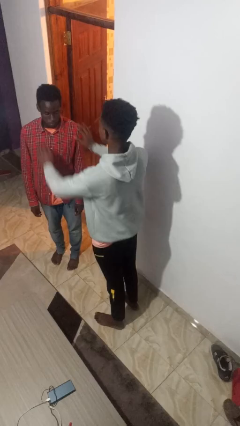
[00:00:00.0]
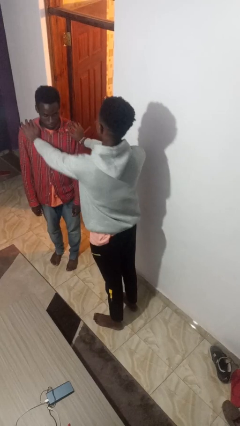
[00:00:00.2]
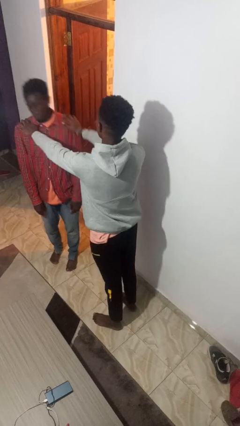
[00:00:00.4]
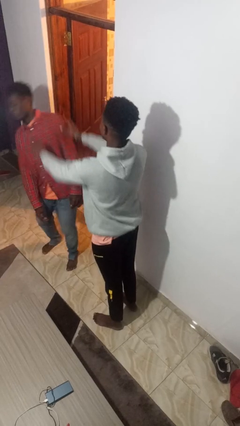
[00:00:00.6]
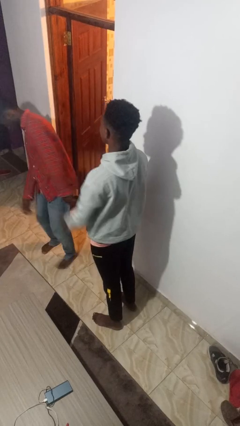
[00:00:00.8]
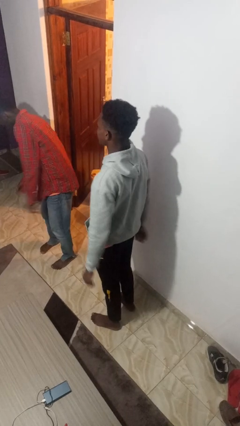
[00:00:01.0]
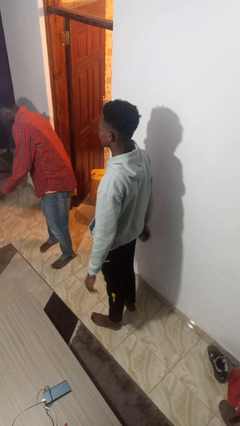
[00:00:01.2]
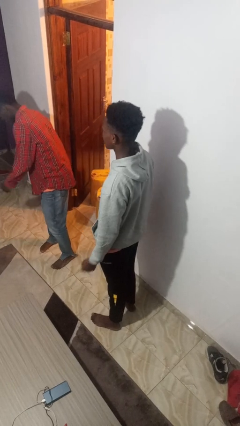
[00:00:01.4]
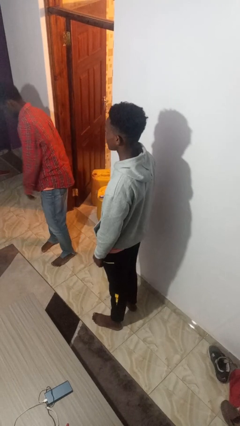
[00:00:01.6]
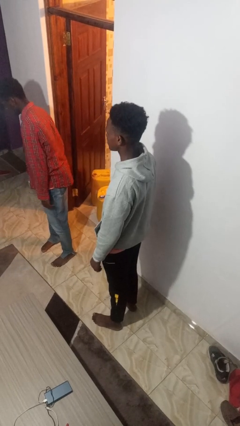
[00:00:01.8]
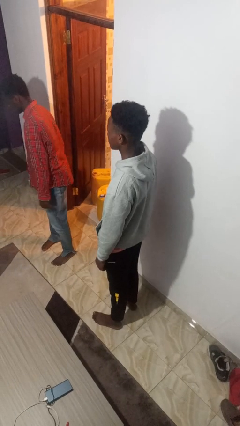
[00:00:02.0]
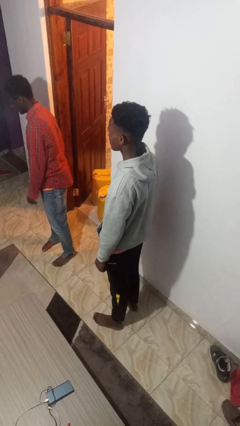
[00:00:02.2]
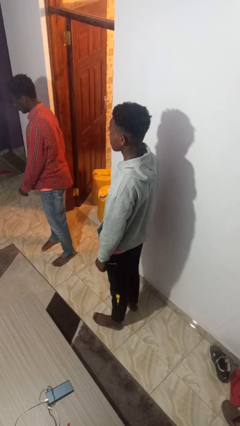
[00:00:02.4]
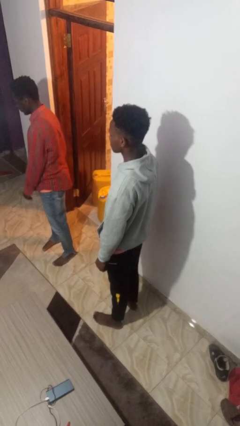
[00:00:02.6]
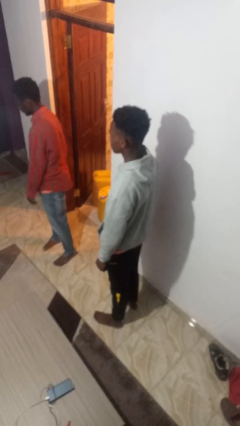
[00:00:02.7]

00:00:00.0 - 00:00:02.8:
person shoves person

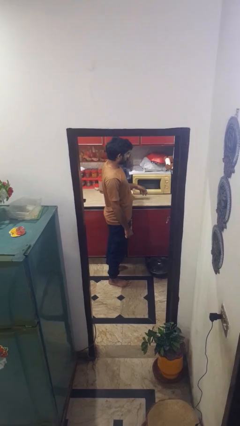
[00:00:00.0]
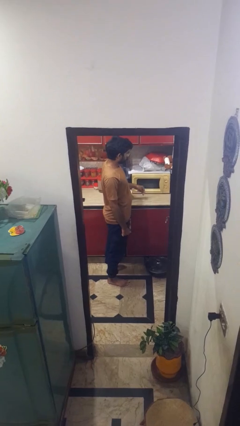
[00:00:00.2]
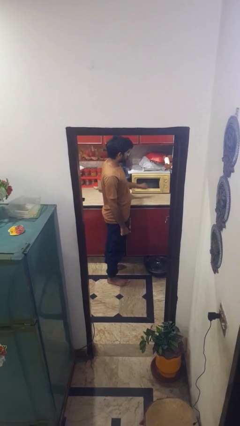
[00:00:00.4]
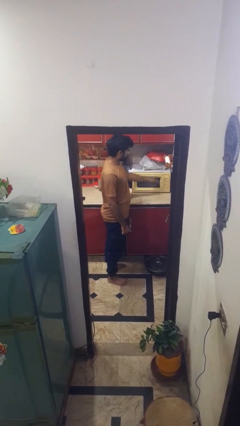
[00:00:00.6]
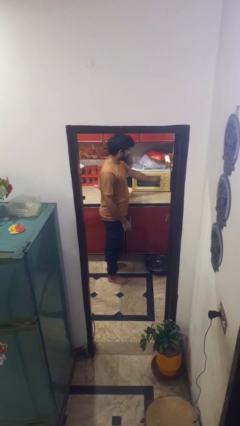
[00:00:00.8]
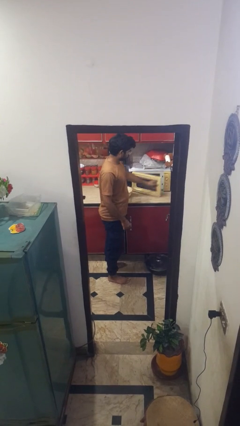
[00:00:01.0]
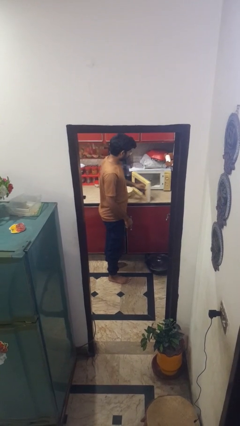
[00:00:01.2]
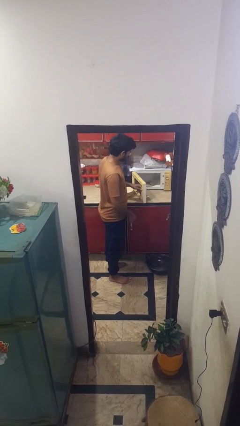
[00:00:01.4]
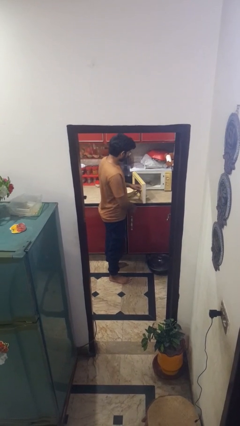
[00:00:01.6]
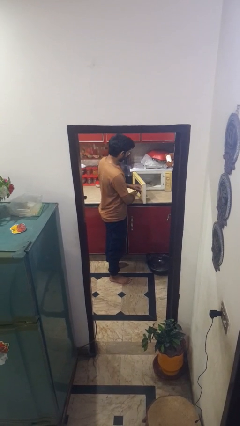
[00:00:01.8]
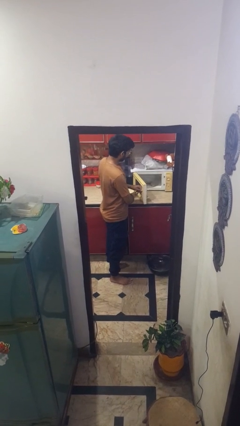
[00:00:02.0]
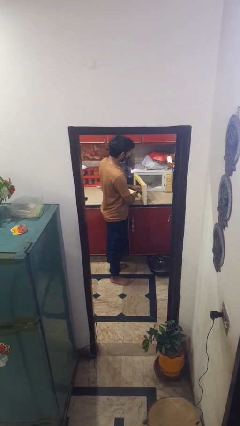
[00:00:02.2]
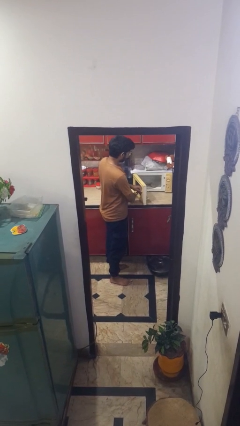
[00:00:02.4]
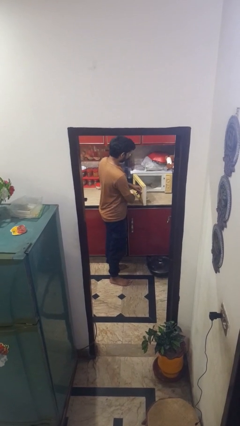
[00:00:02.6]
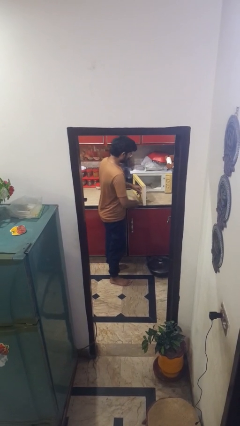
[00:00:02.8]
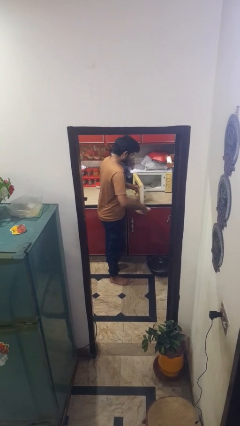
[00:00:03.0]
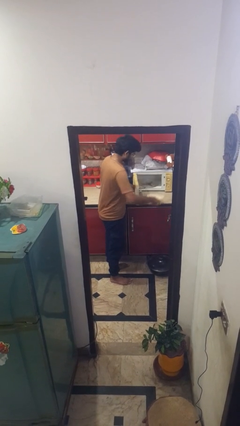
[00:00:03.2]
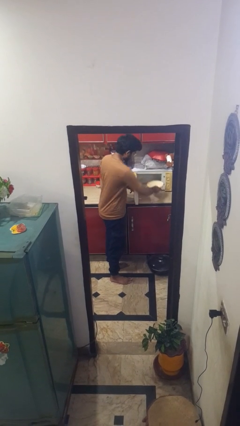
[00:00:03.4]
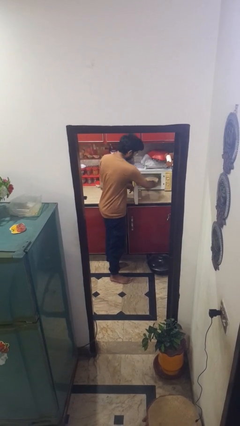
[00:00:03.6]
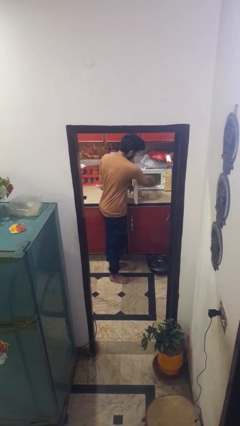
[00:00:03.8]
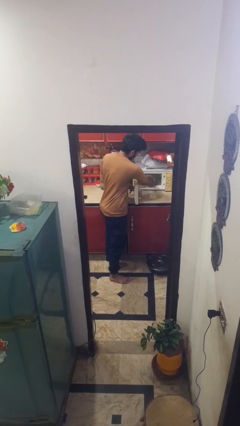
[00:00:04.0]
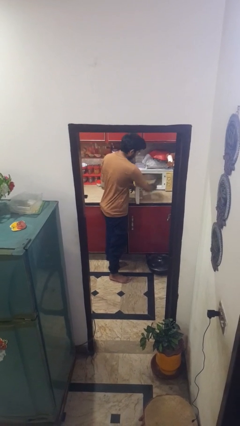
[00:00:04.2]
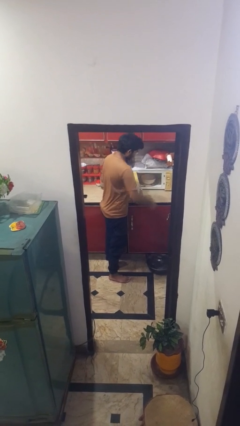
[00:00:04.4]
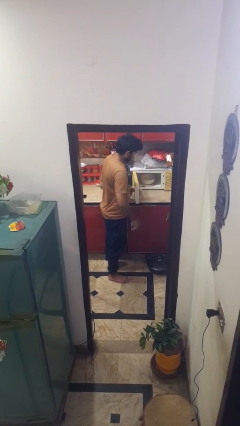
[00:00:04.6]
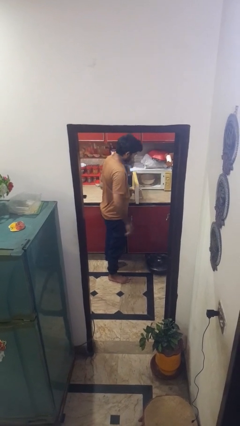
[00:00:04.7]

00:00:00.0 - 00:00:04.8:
person opens microwave

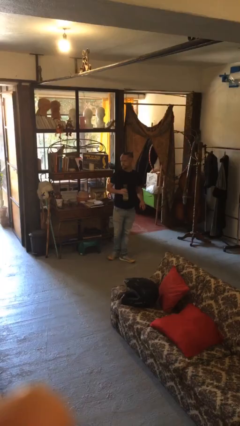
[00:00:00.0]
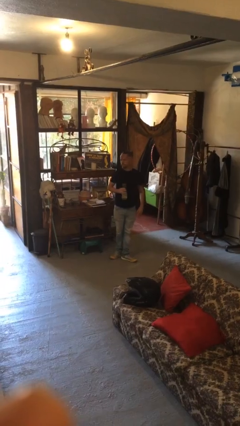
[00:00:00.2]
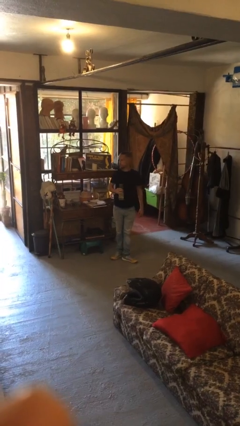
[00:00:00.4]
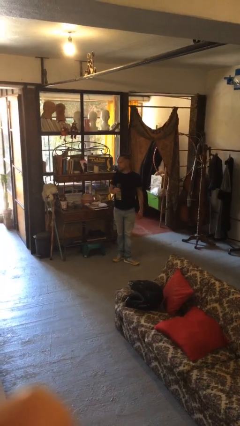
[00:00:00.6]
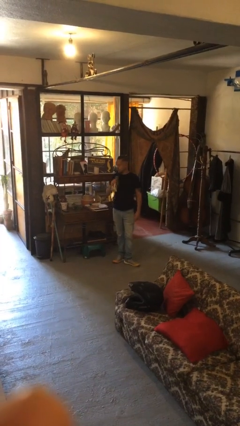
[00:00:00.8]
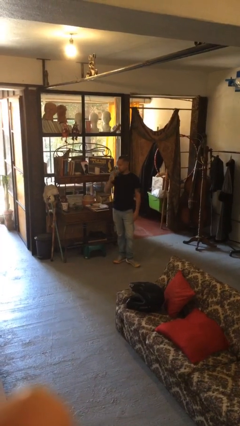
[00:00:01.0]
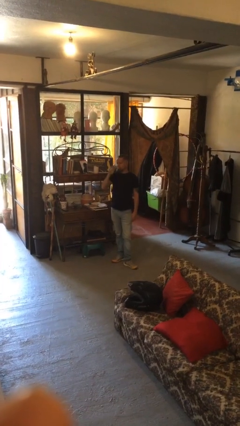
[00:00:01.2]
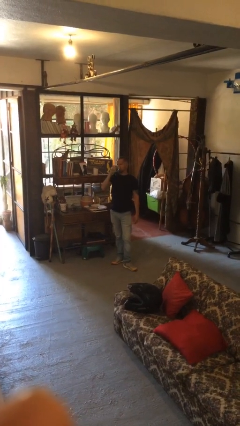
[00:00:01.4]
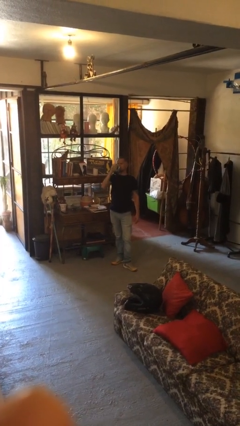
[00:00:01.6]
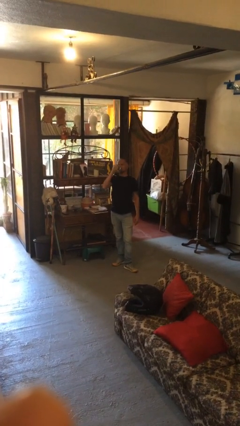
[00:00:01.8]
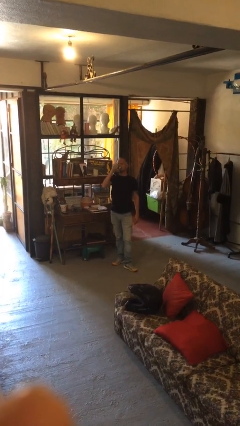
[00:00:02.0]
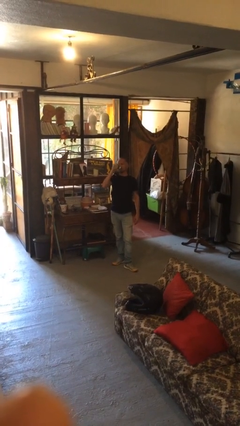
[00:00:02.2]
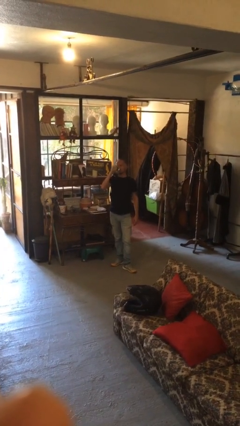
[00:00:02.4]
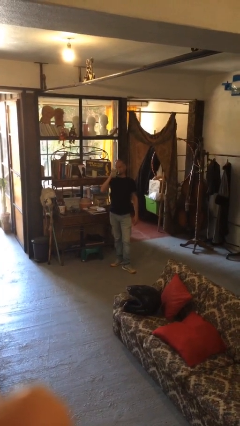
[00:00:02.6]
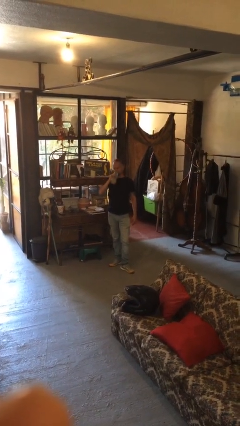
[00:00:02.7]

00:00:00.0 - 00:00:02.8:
person drinks from bottle

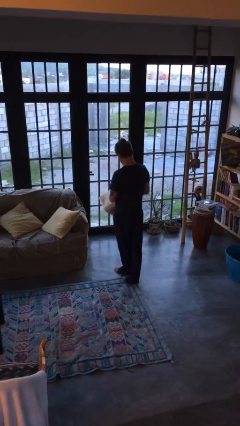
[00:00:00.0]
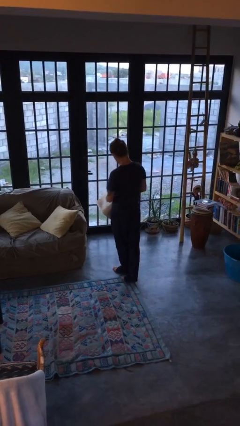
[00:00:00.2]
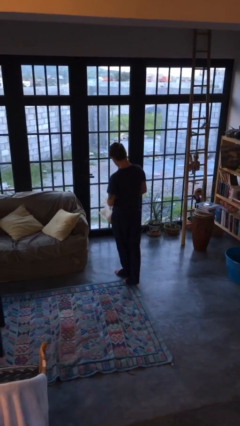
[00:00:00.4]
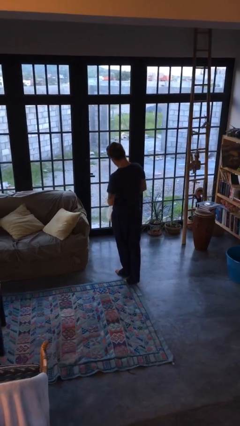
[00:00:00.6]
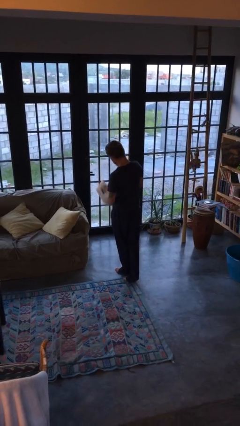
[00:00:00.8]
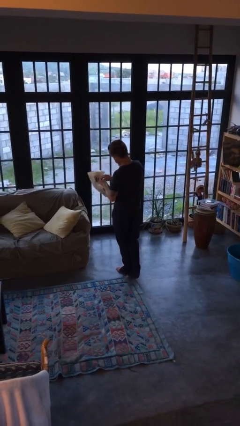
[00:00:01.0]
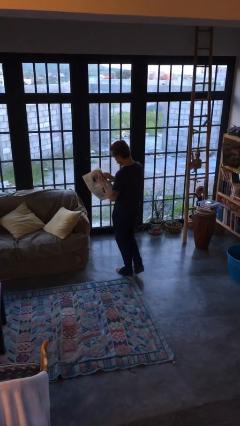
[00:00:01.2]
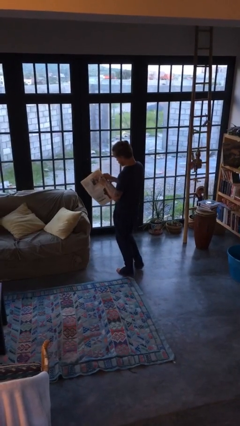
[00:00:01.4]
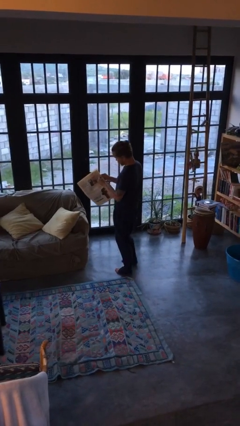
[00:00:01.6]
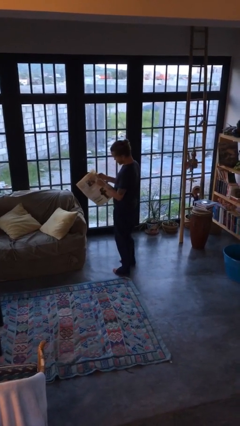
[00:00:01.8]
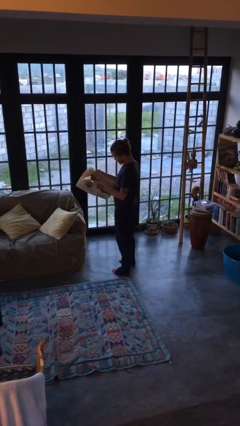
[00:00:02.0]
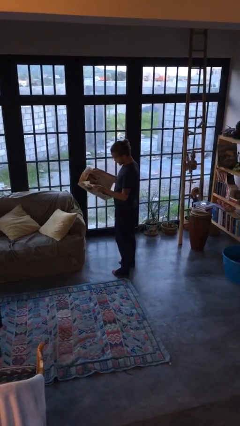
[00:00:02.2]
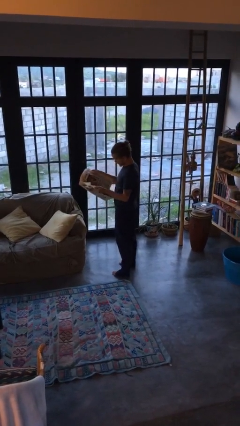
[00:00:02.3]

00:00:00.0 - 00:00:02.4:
person reads newspaper

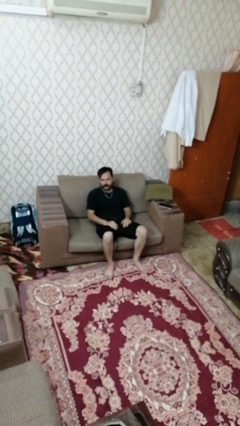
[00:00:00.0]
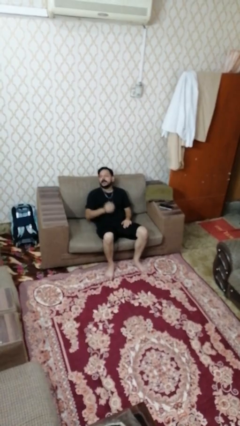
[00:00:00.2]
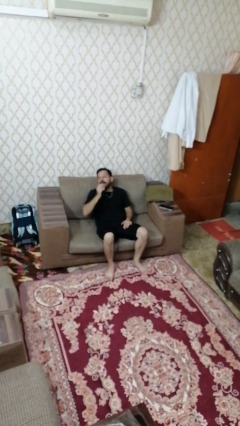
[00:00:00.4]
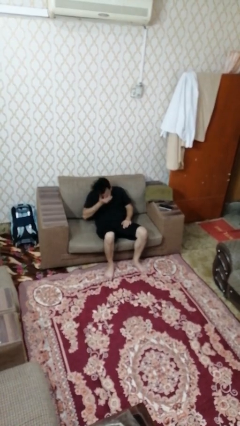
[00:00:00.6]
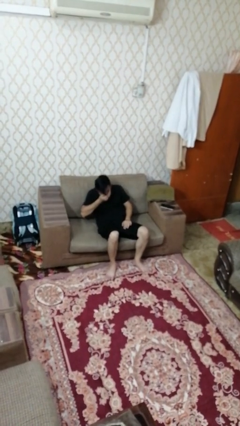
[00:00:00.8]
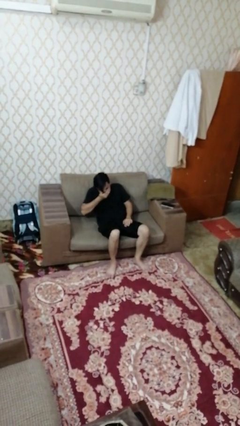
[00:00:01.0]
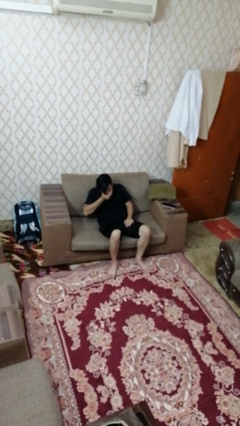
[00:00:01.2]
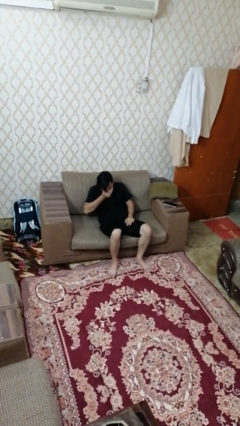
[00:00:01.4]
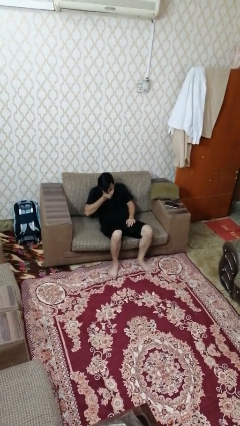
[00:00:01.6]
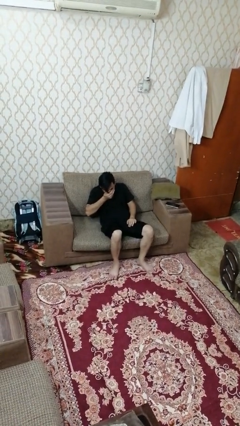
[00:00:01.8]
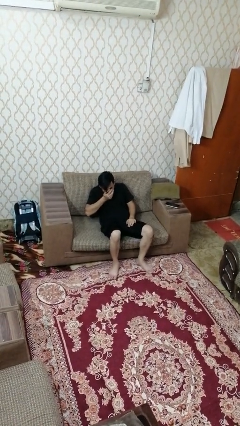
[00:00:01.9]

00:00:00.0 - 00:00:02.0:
person sneezes into hand

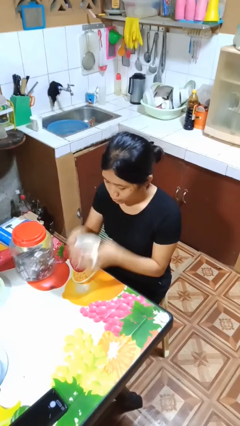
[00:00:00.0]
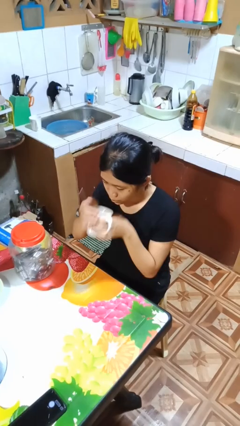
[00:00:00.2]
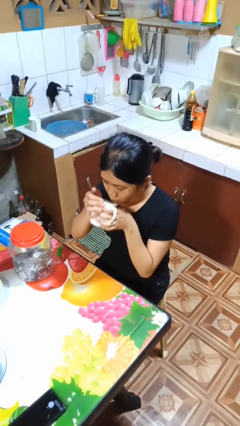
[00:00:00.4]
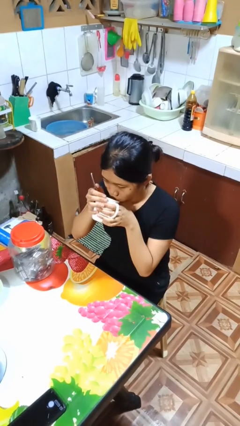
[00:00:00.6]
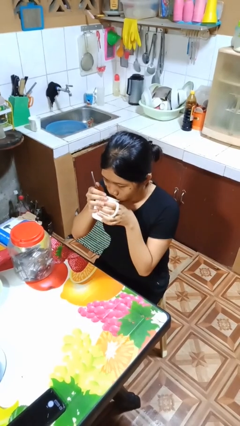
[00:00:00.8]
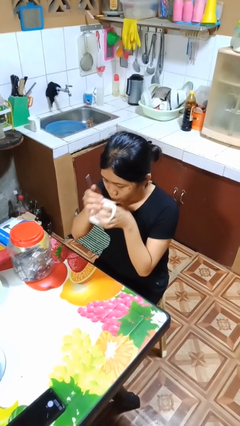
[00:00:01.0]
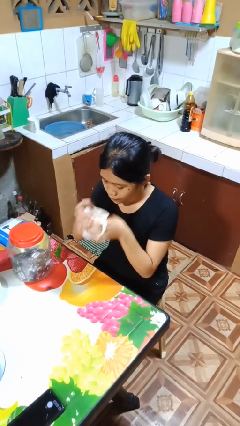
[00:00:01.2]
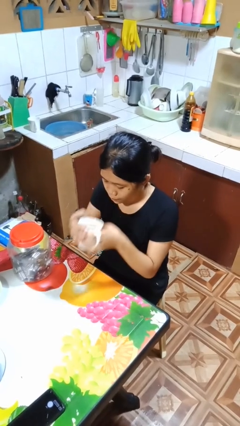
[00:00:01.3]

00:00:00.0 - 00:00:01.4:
person drinks from mug

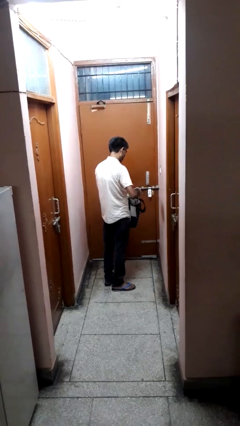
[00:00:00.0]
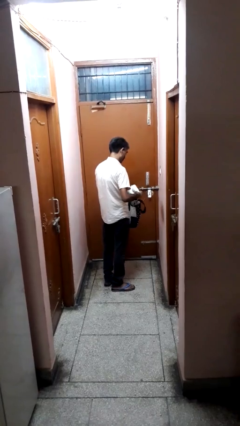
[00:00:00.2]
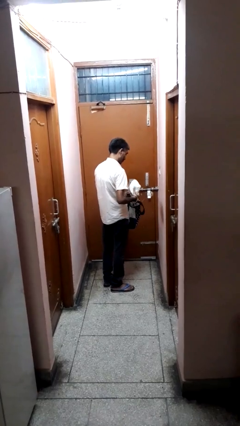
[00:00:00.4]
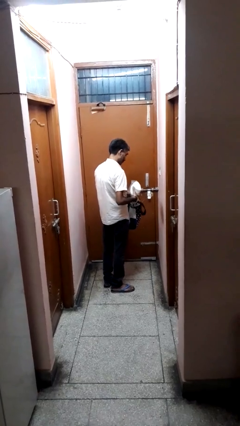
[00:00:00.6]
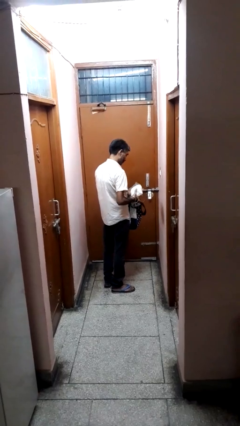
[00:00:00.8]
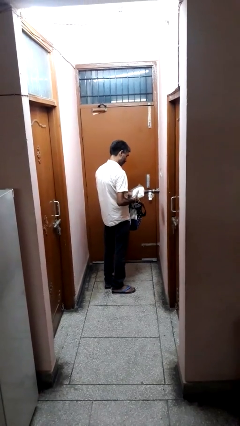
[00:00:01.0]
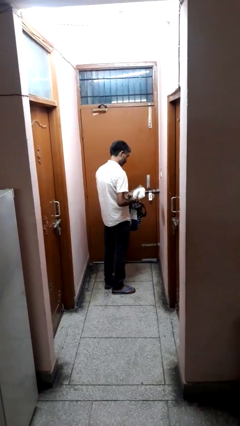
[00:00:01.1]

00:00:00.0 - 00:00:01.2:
person takes object from bag
